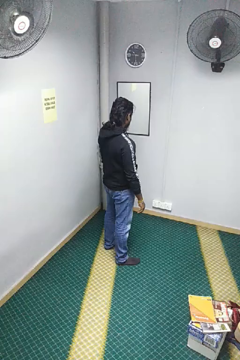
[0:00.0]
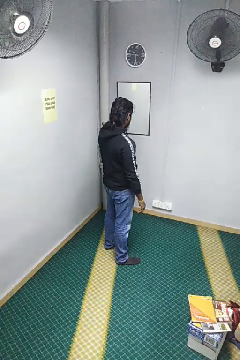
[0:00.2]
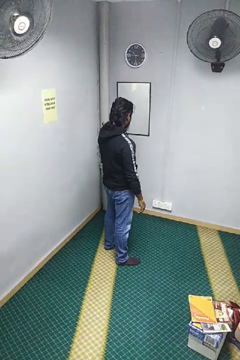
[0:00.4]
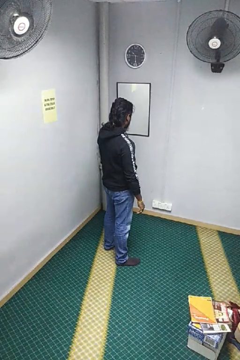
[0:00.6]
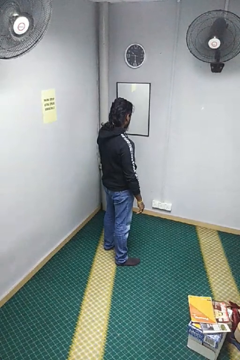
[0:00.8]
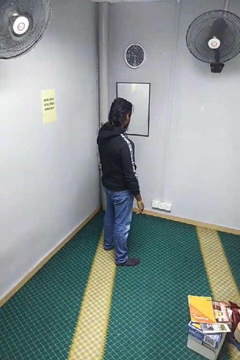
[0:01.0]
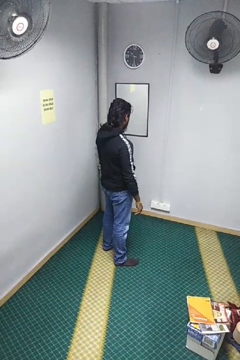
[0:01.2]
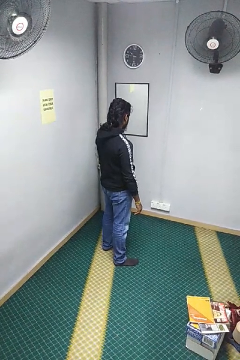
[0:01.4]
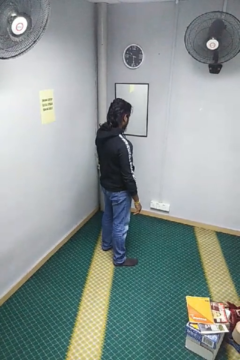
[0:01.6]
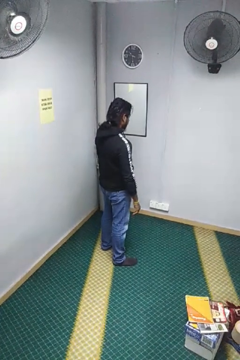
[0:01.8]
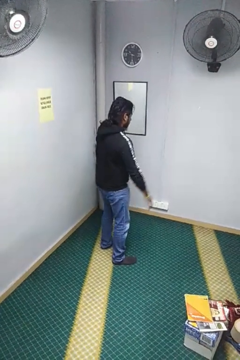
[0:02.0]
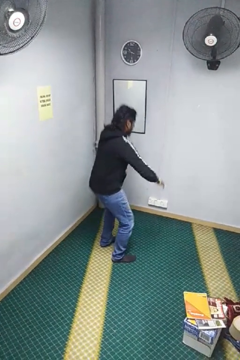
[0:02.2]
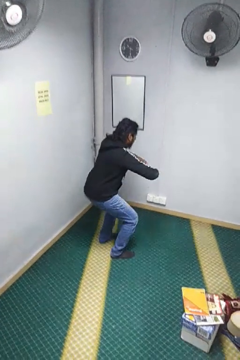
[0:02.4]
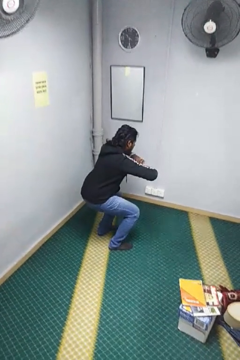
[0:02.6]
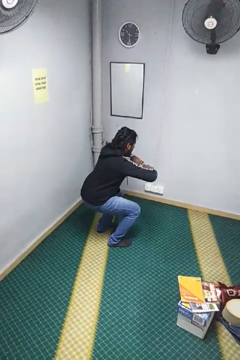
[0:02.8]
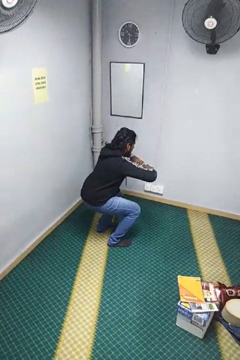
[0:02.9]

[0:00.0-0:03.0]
person squats

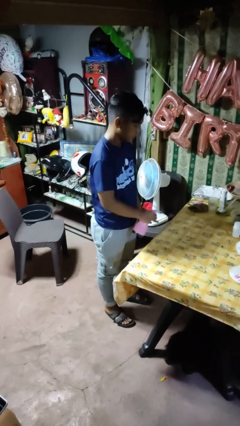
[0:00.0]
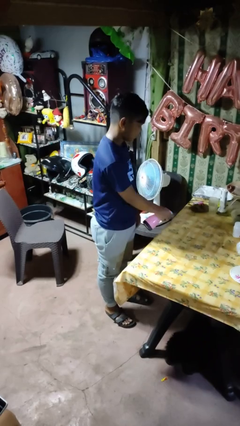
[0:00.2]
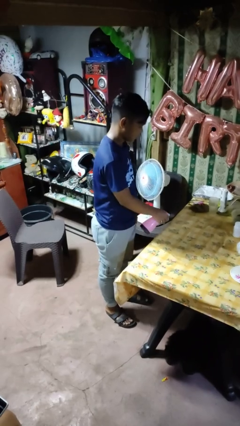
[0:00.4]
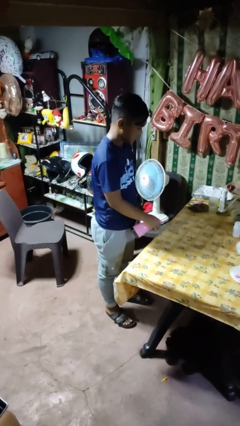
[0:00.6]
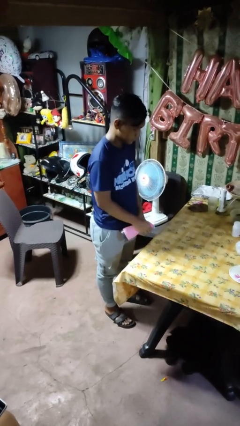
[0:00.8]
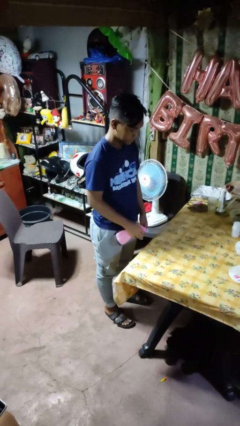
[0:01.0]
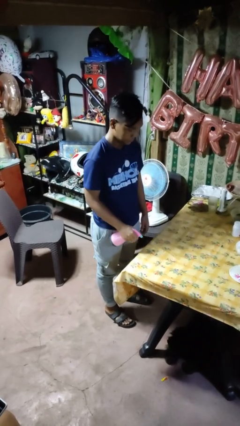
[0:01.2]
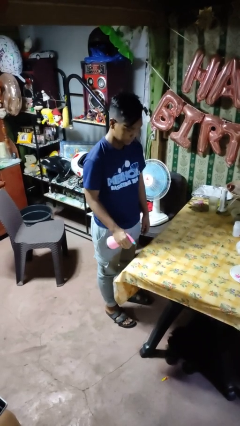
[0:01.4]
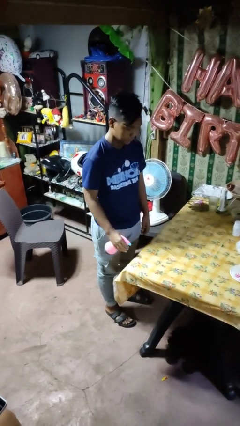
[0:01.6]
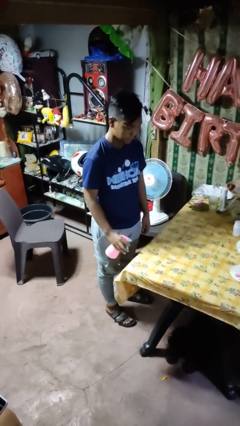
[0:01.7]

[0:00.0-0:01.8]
person sprays from bottle

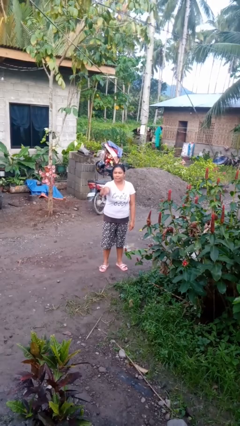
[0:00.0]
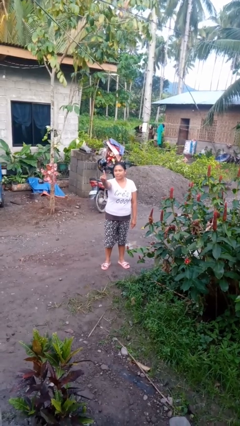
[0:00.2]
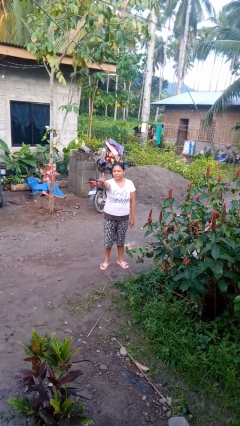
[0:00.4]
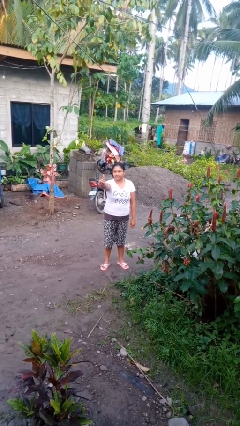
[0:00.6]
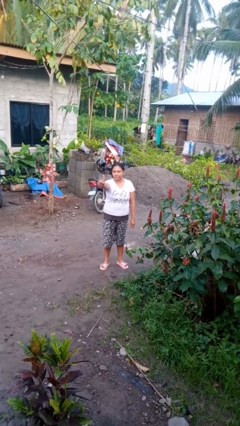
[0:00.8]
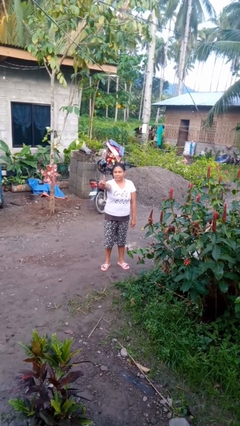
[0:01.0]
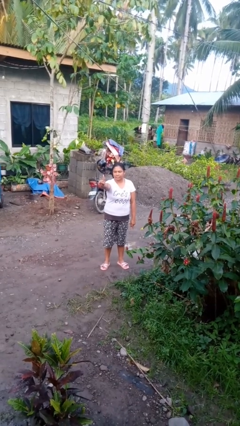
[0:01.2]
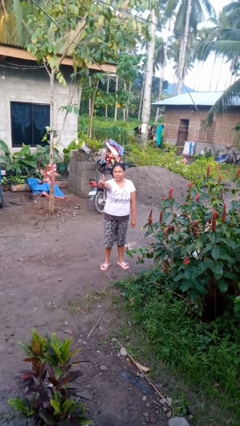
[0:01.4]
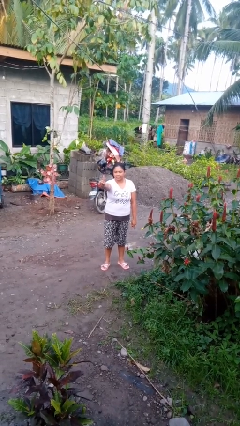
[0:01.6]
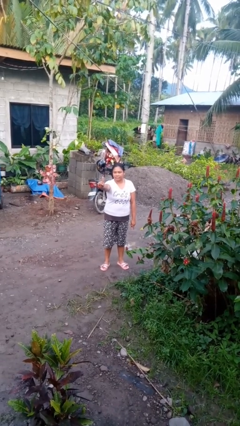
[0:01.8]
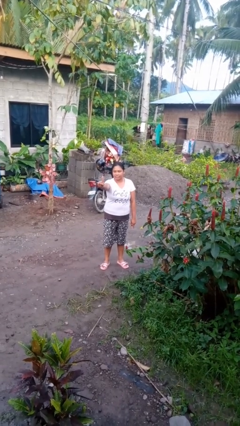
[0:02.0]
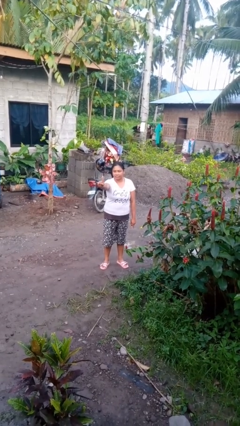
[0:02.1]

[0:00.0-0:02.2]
person gestures number one

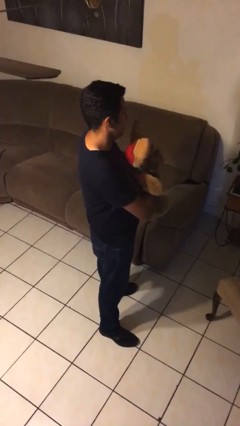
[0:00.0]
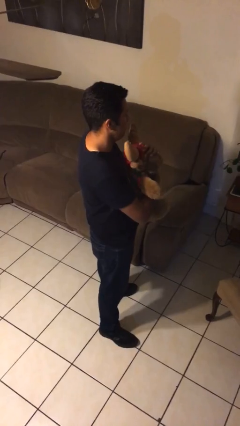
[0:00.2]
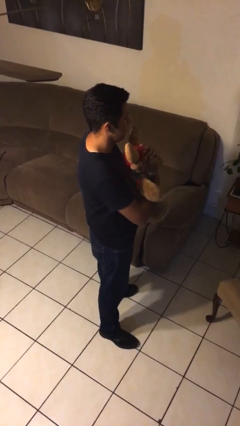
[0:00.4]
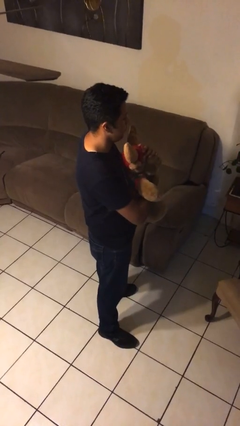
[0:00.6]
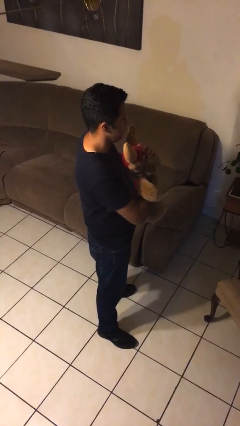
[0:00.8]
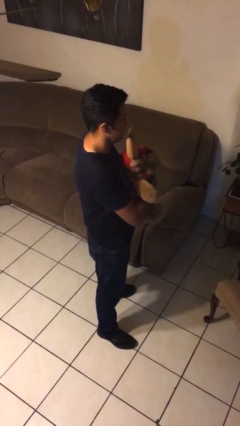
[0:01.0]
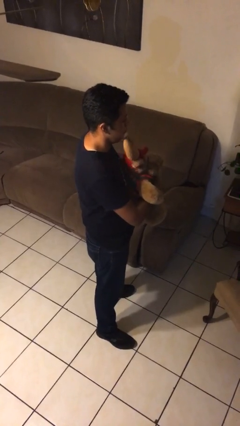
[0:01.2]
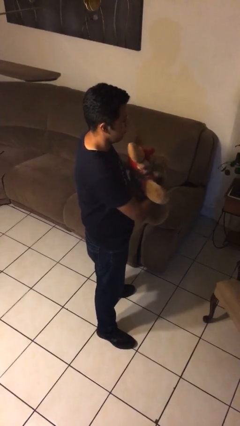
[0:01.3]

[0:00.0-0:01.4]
person hugs stuffed animal

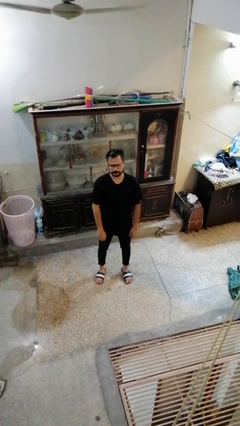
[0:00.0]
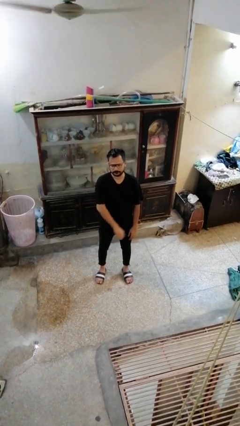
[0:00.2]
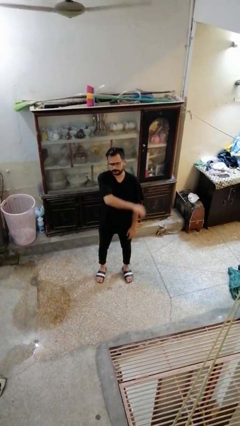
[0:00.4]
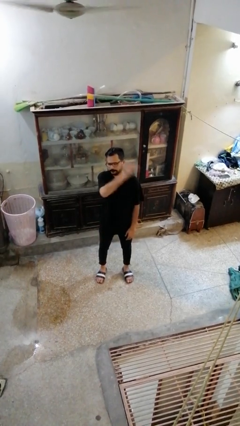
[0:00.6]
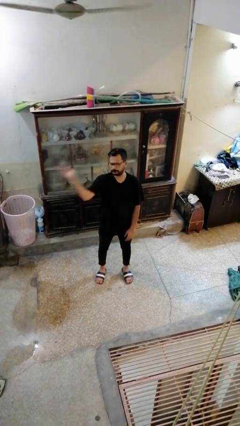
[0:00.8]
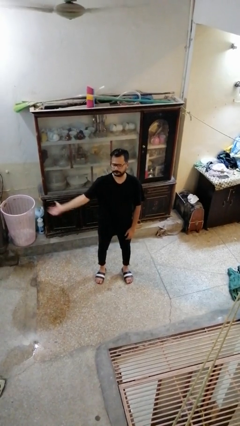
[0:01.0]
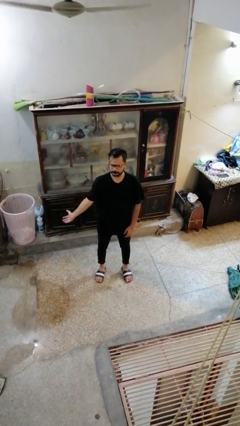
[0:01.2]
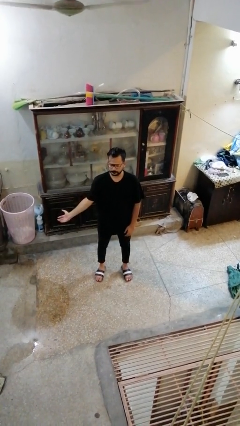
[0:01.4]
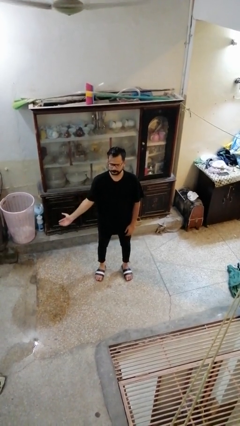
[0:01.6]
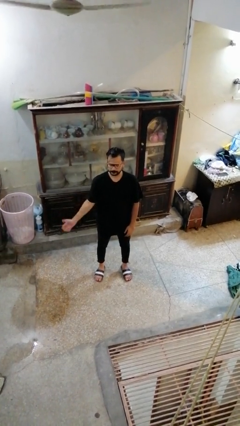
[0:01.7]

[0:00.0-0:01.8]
person gestures swipe right

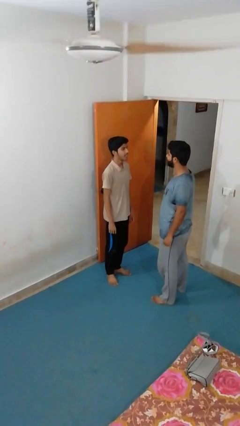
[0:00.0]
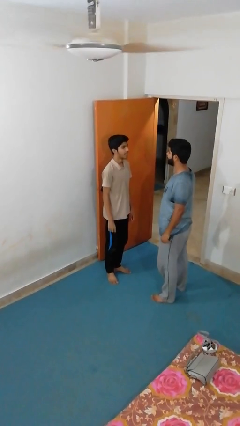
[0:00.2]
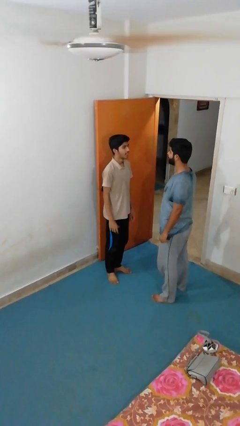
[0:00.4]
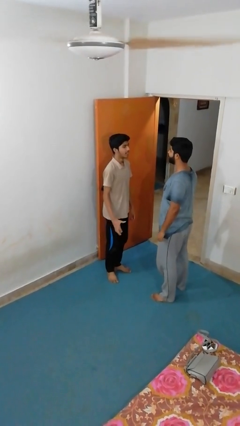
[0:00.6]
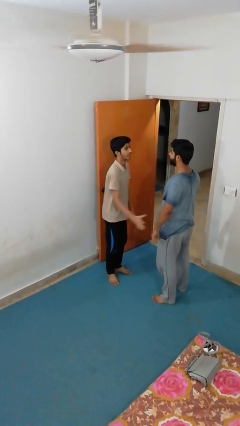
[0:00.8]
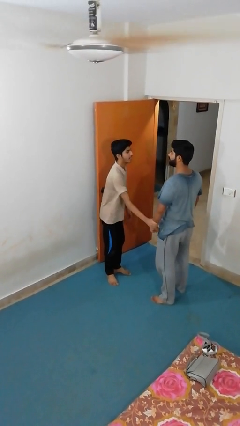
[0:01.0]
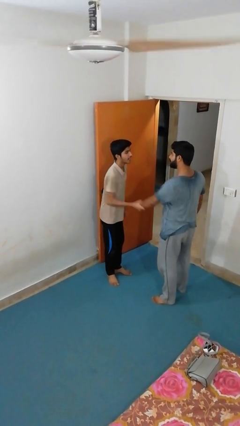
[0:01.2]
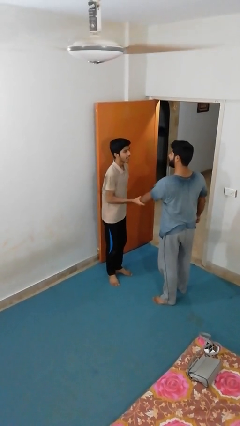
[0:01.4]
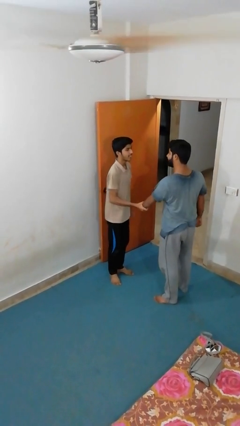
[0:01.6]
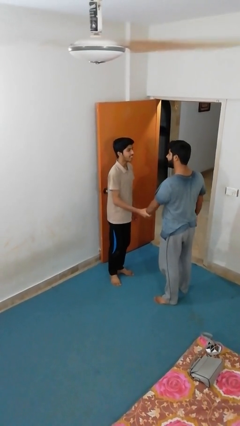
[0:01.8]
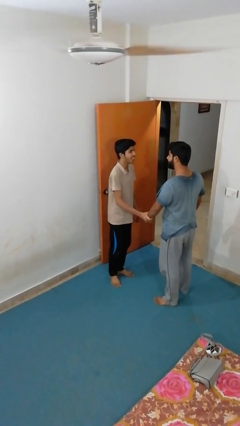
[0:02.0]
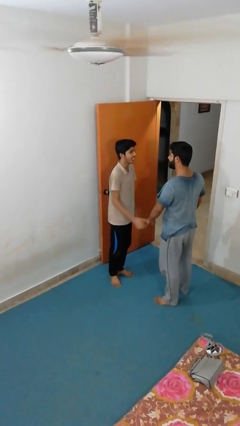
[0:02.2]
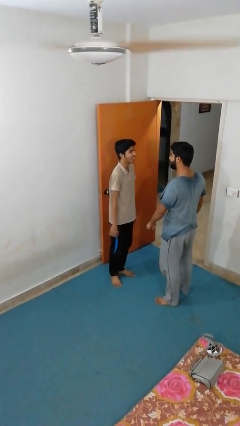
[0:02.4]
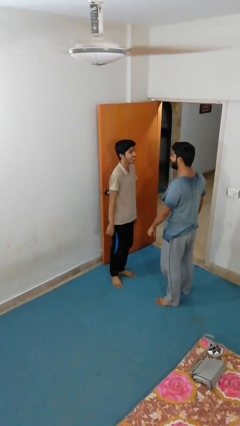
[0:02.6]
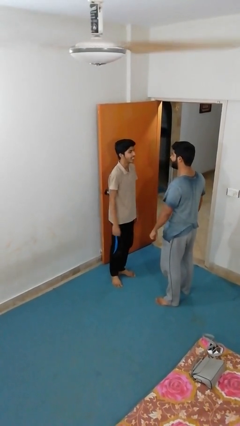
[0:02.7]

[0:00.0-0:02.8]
person grabs person by forearm

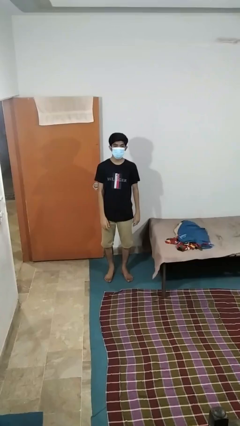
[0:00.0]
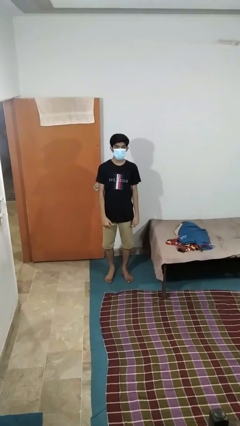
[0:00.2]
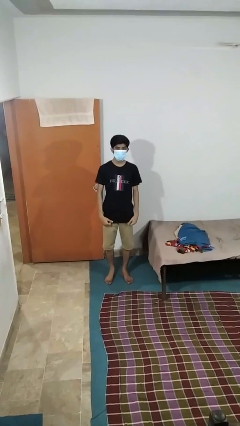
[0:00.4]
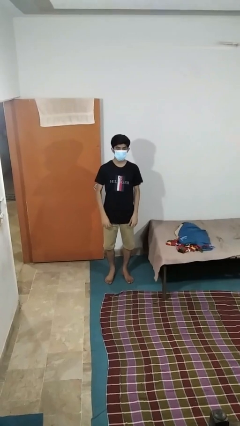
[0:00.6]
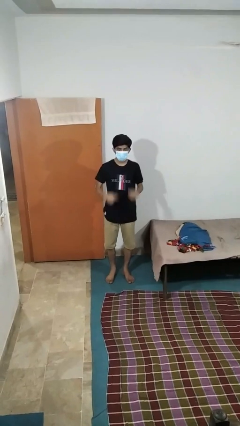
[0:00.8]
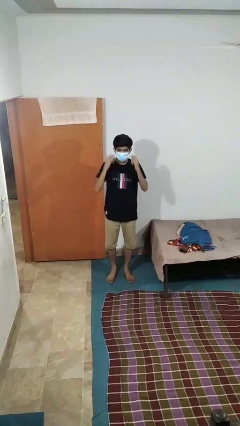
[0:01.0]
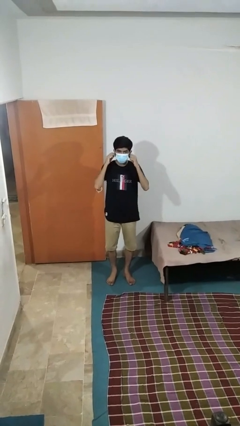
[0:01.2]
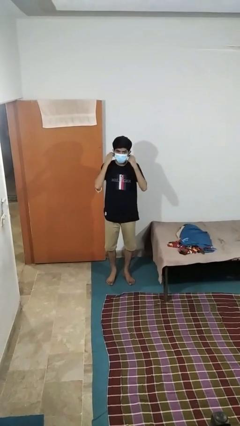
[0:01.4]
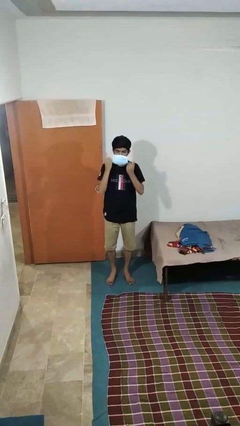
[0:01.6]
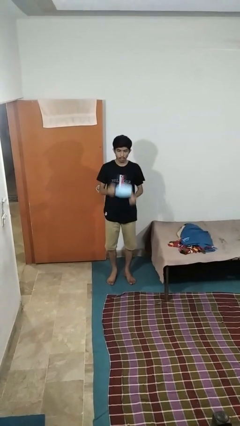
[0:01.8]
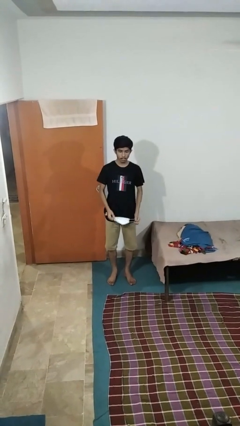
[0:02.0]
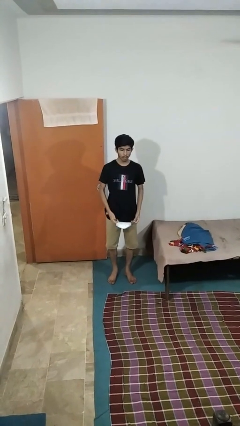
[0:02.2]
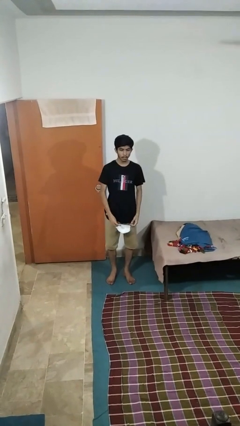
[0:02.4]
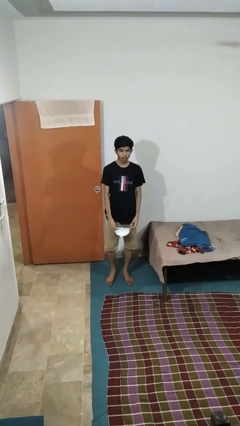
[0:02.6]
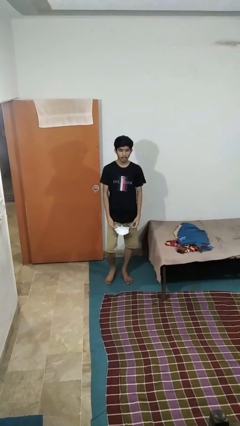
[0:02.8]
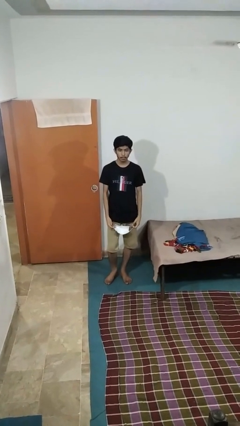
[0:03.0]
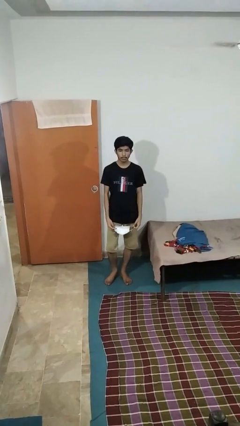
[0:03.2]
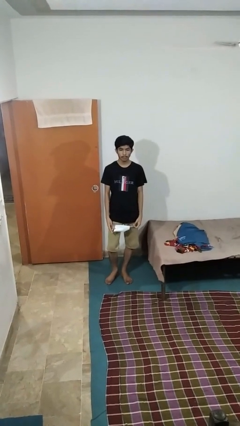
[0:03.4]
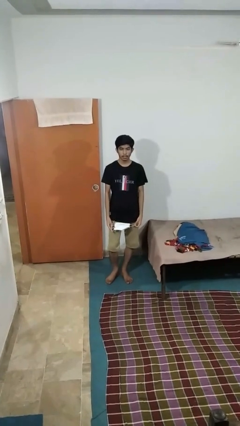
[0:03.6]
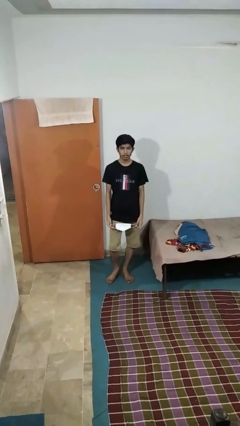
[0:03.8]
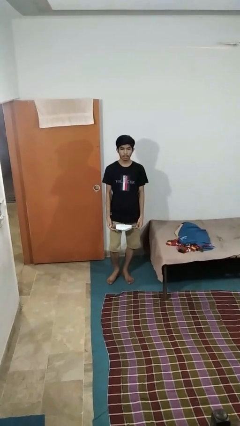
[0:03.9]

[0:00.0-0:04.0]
person takes off facemask

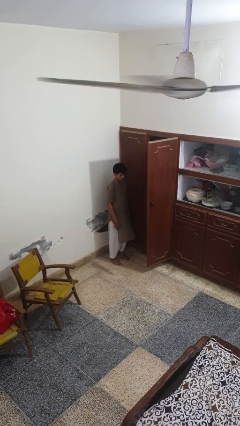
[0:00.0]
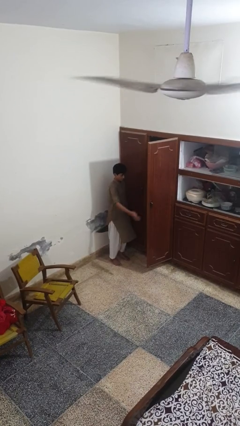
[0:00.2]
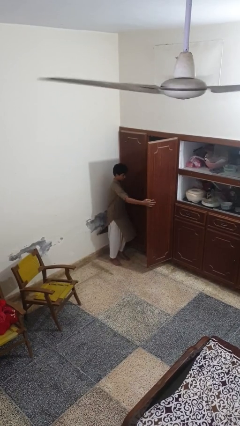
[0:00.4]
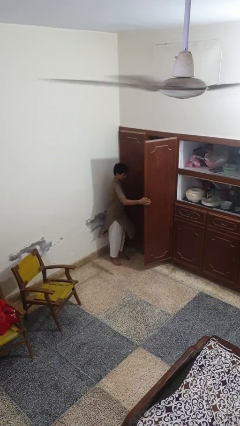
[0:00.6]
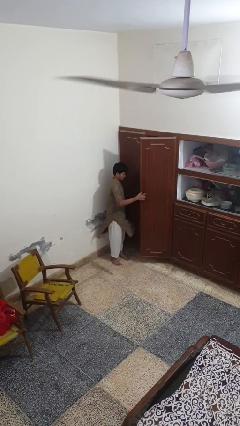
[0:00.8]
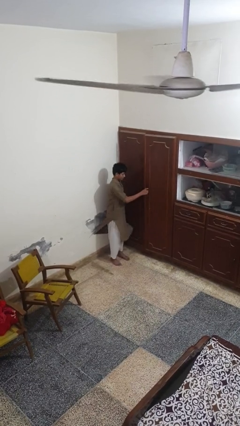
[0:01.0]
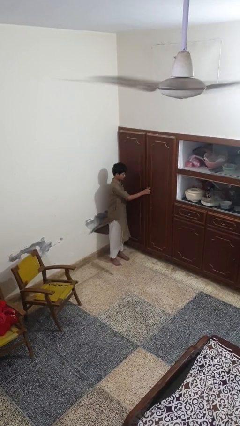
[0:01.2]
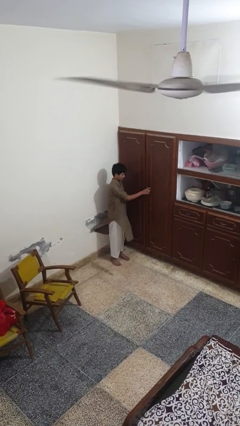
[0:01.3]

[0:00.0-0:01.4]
person closes closet door
